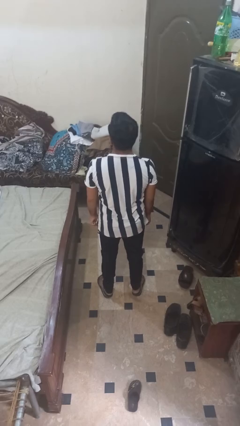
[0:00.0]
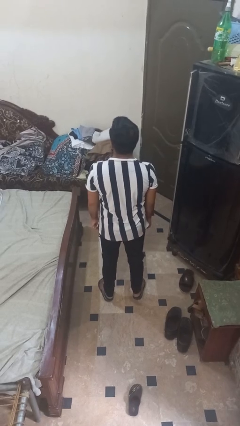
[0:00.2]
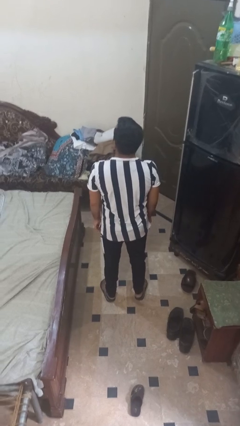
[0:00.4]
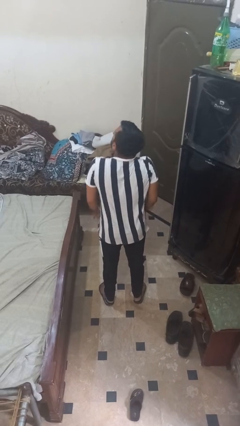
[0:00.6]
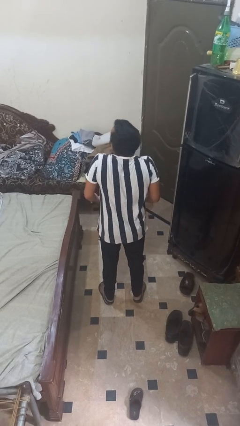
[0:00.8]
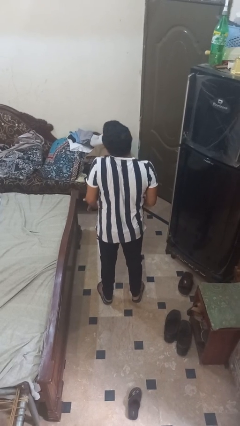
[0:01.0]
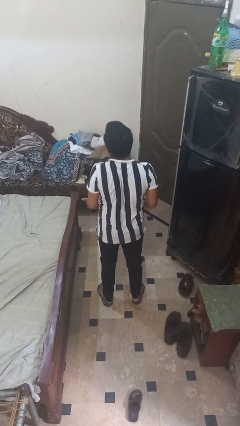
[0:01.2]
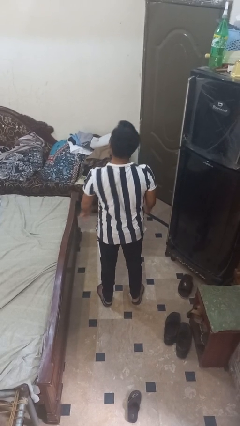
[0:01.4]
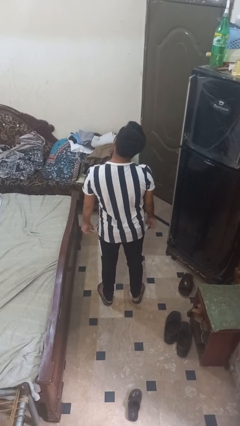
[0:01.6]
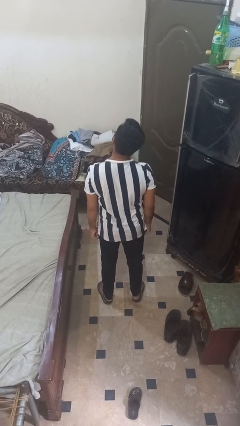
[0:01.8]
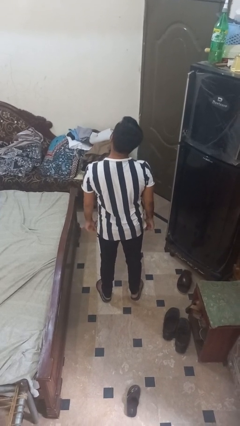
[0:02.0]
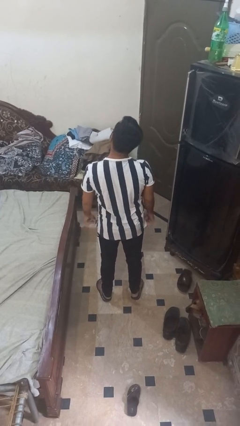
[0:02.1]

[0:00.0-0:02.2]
person shrugs

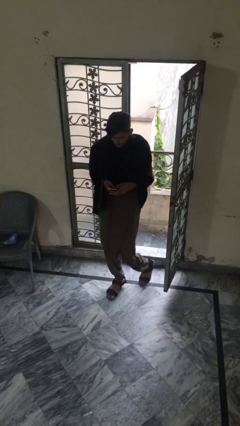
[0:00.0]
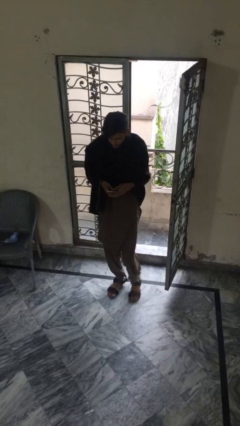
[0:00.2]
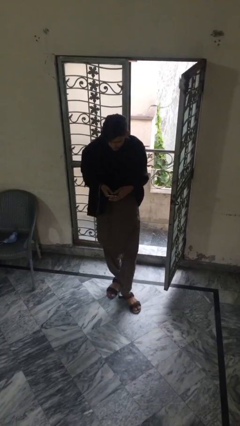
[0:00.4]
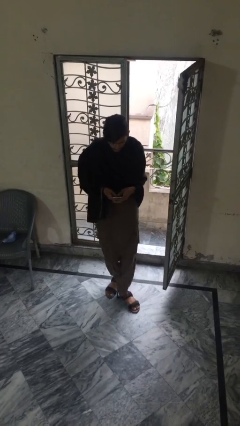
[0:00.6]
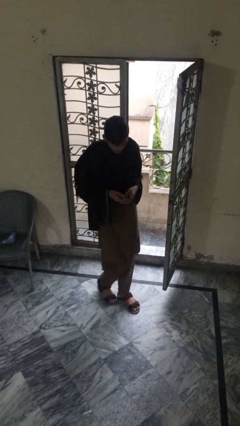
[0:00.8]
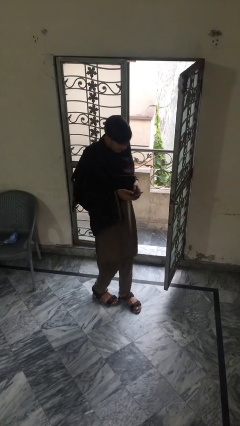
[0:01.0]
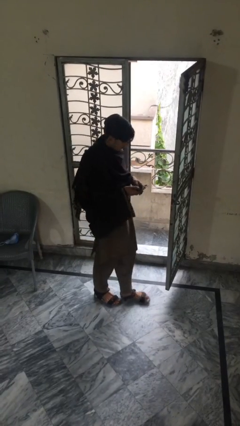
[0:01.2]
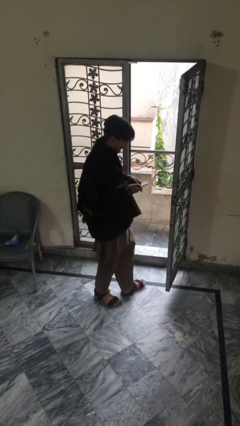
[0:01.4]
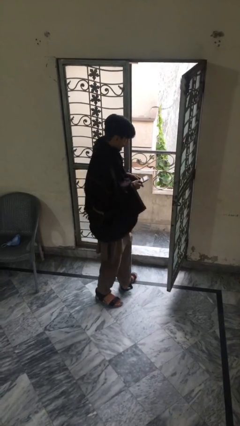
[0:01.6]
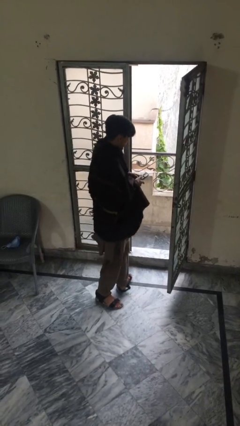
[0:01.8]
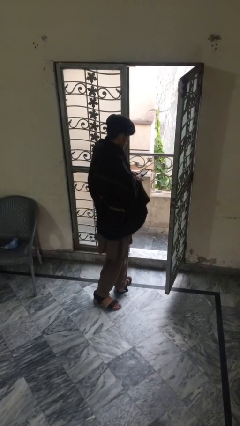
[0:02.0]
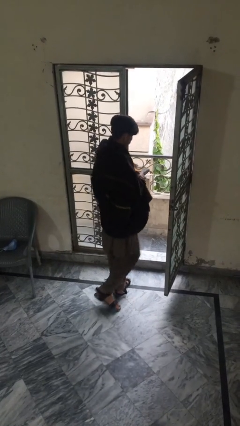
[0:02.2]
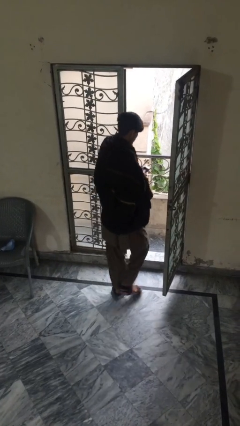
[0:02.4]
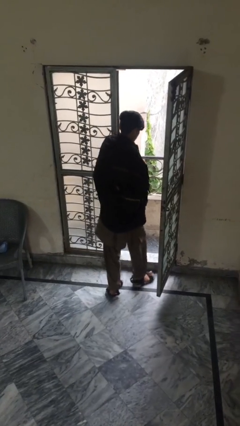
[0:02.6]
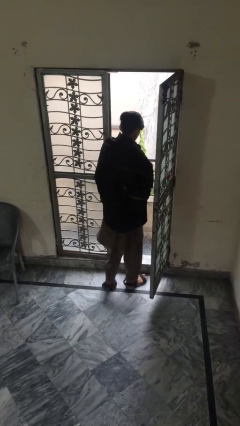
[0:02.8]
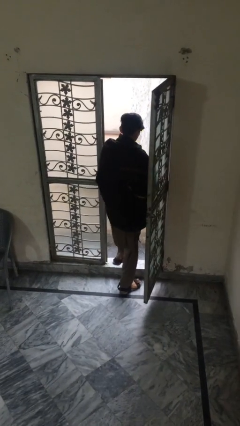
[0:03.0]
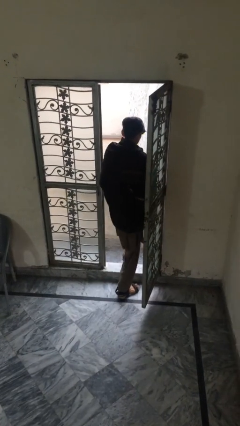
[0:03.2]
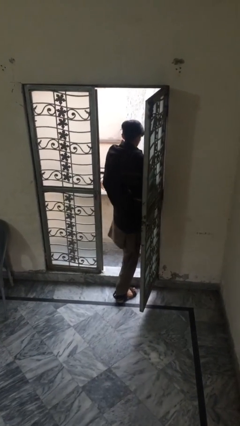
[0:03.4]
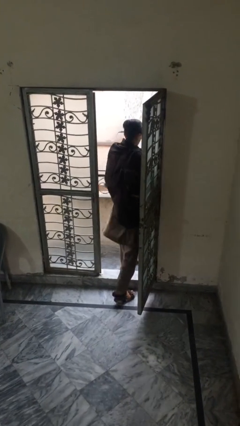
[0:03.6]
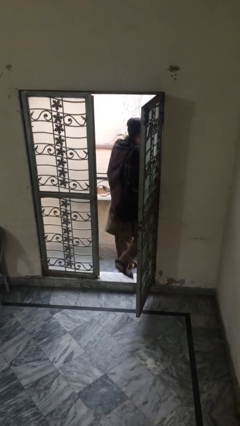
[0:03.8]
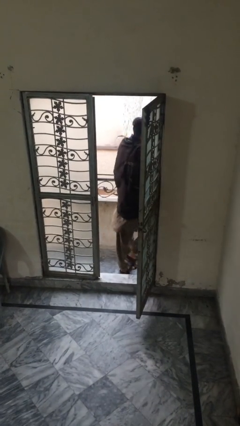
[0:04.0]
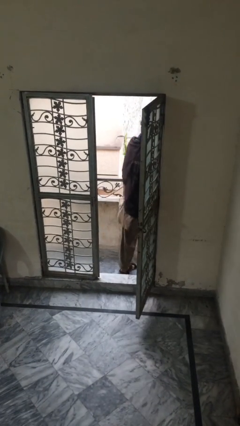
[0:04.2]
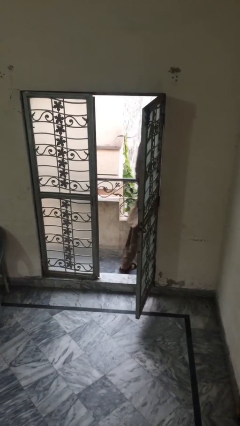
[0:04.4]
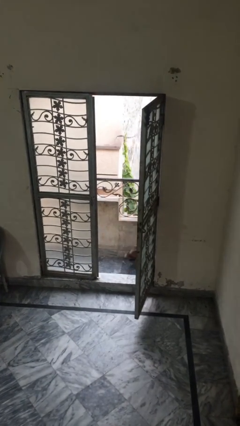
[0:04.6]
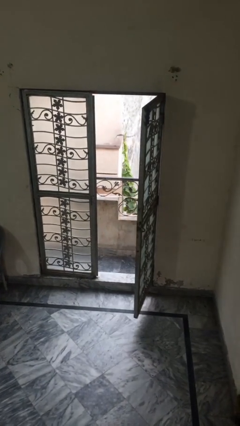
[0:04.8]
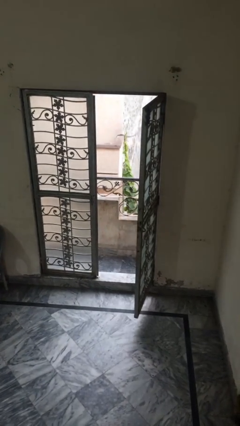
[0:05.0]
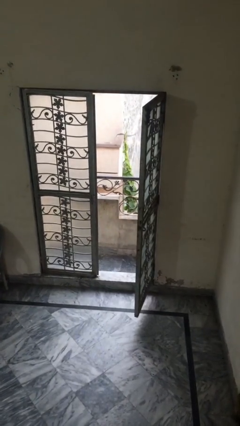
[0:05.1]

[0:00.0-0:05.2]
person exits scene through structure

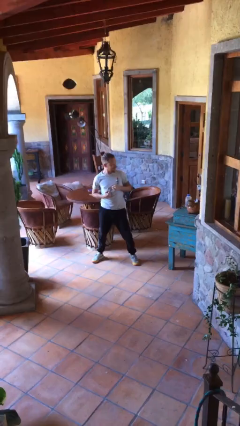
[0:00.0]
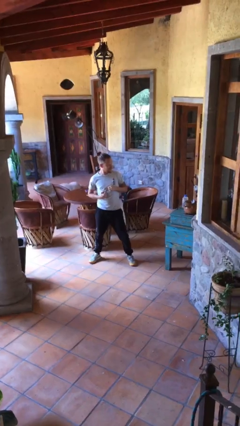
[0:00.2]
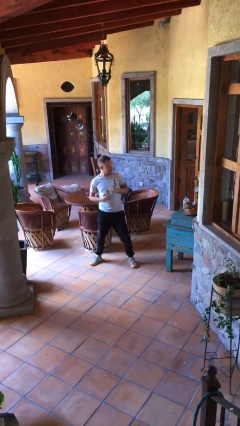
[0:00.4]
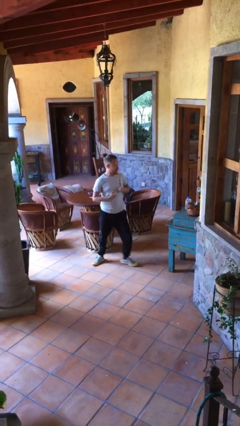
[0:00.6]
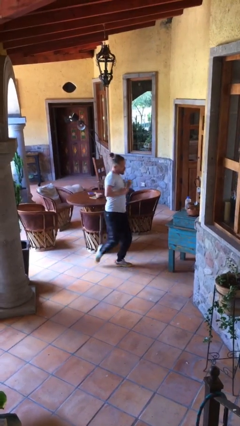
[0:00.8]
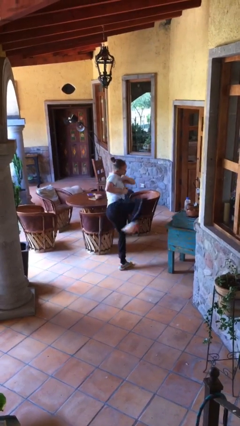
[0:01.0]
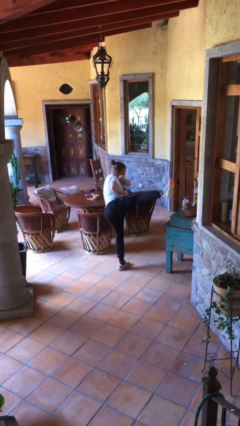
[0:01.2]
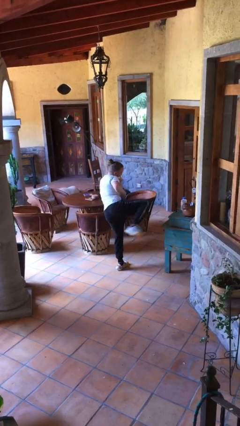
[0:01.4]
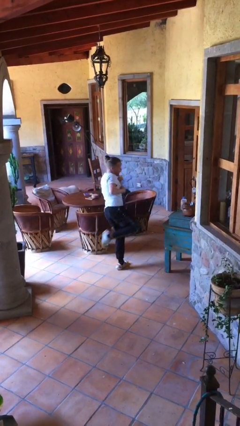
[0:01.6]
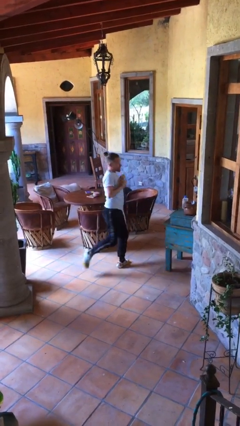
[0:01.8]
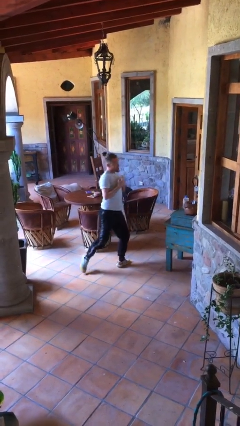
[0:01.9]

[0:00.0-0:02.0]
person karate kicks

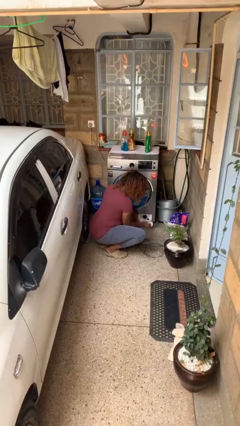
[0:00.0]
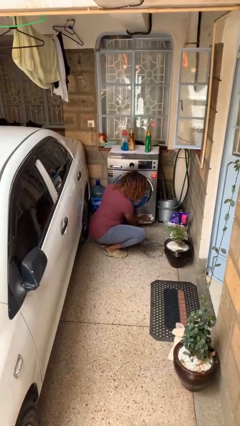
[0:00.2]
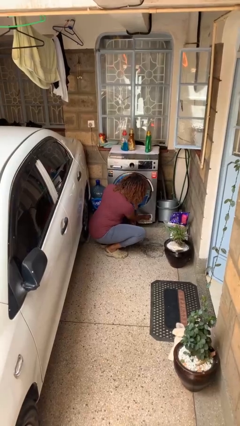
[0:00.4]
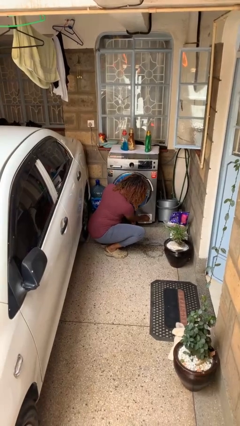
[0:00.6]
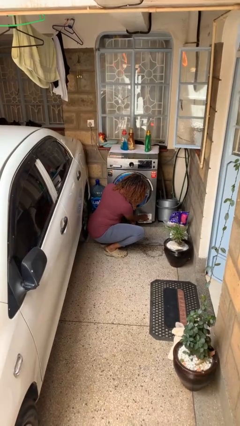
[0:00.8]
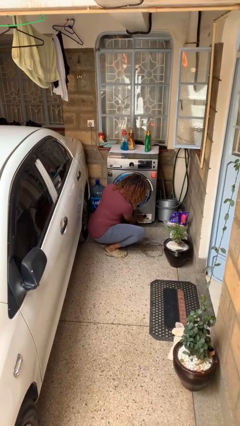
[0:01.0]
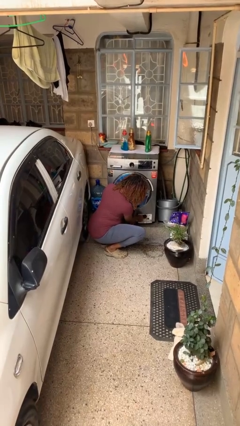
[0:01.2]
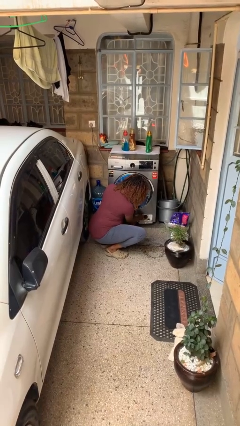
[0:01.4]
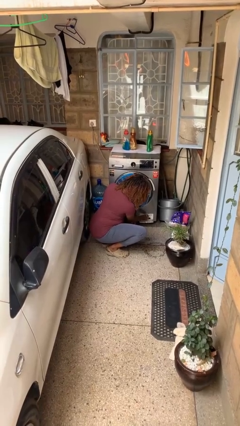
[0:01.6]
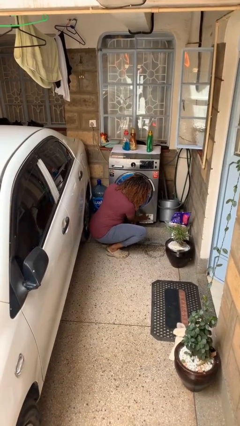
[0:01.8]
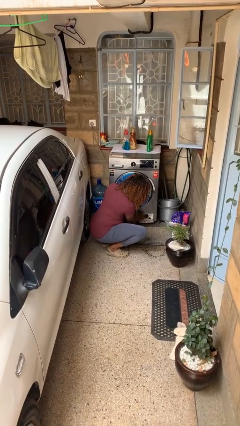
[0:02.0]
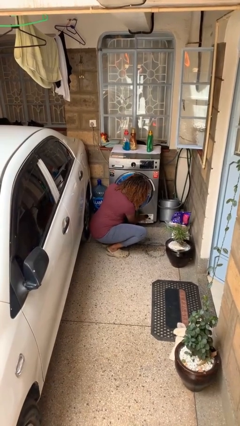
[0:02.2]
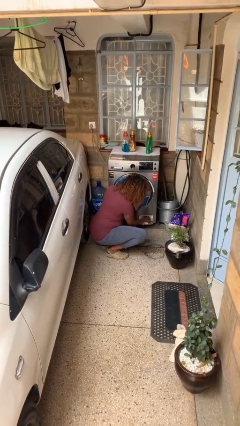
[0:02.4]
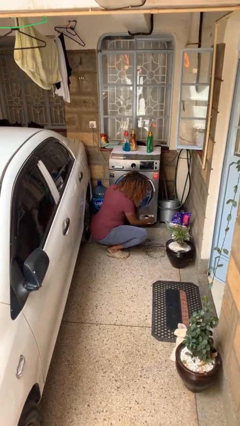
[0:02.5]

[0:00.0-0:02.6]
person cleans dryer lint trap

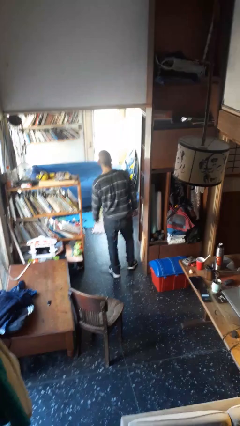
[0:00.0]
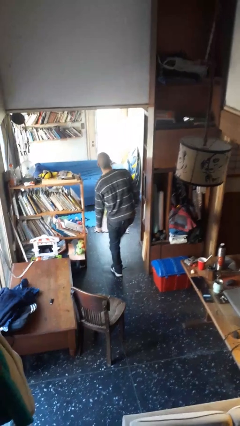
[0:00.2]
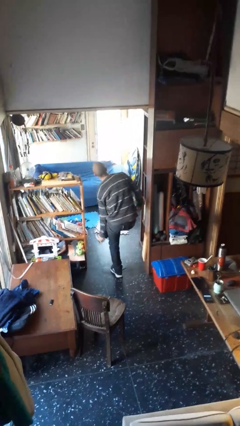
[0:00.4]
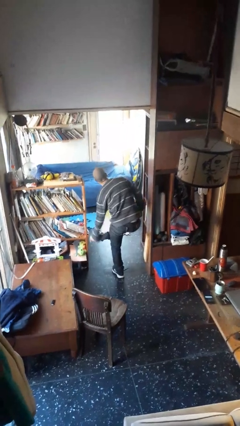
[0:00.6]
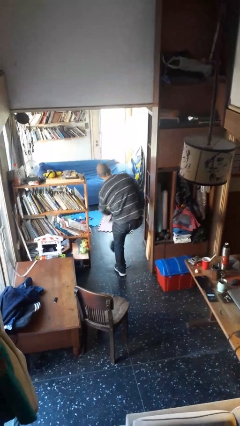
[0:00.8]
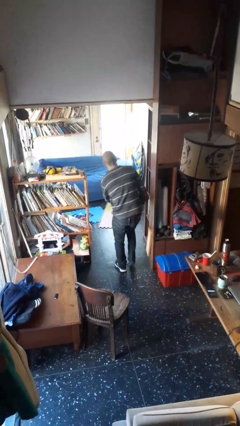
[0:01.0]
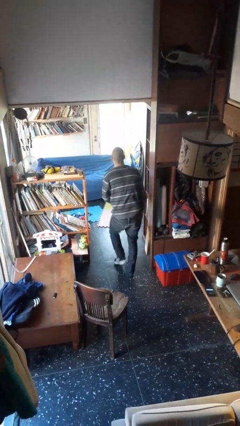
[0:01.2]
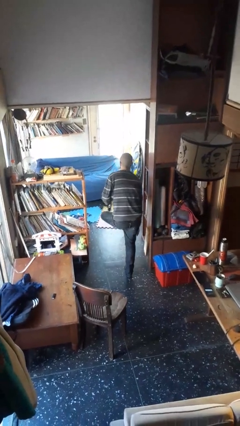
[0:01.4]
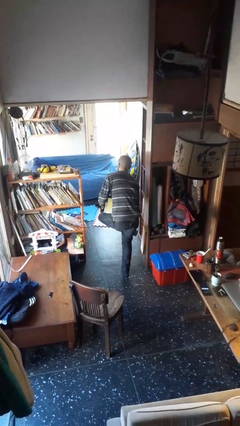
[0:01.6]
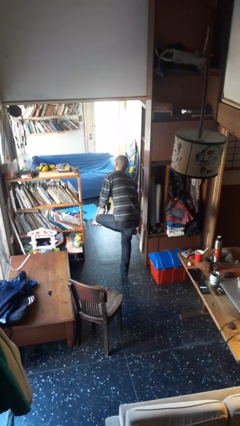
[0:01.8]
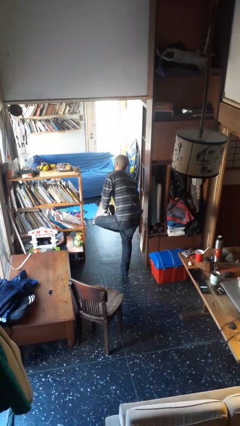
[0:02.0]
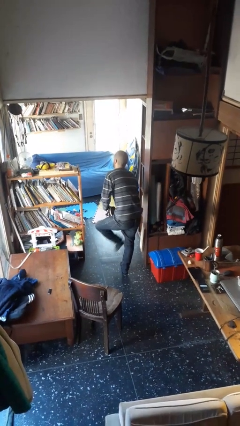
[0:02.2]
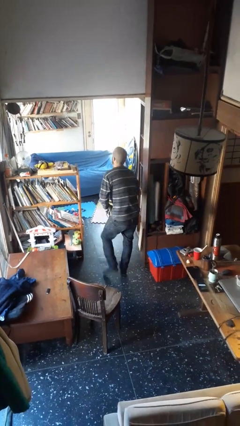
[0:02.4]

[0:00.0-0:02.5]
person takes off shoes

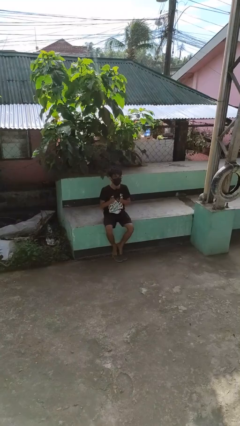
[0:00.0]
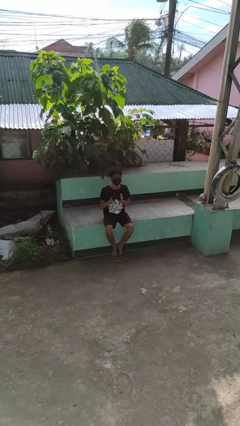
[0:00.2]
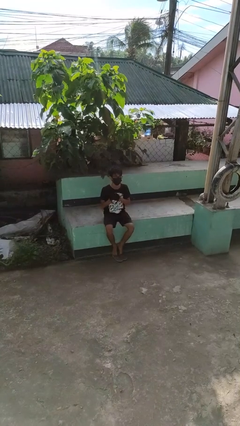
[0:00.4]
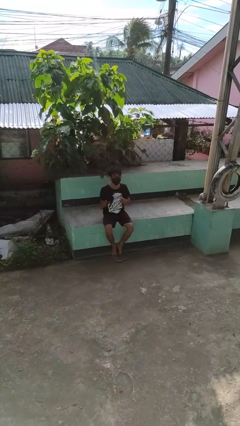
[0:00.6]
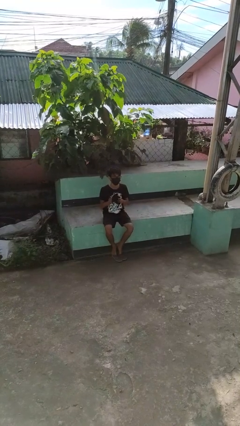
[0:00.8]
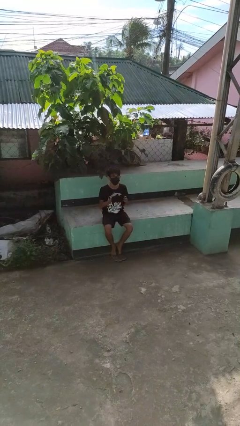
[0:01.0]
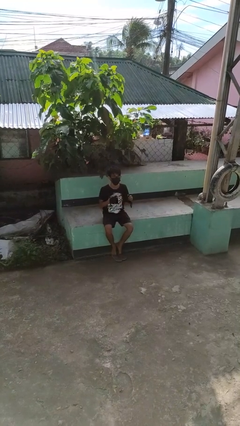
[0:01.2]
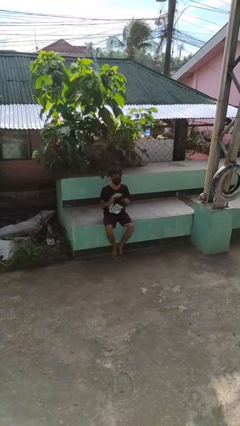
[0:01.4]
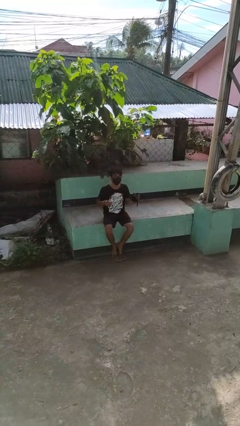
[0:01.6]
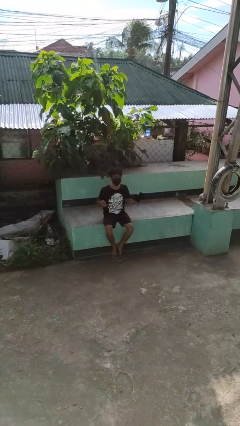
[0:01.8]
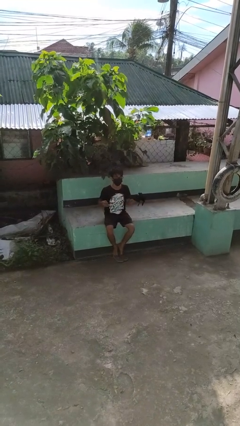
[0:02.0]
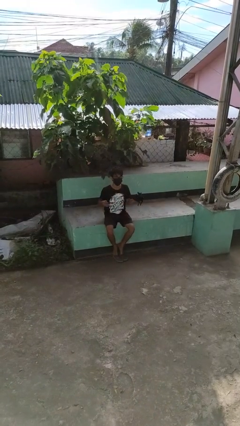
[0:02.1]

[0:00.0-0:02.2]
person takes off gloves

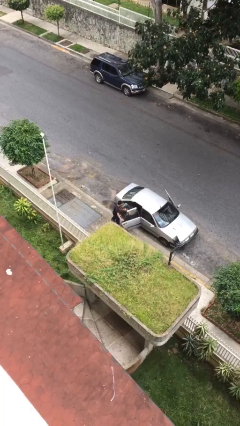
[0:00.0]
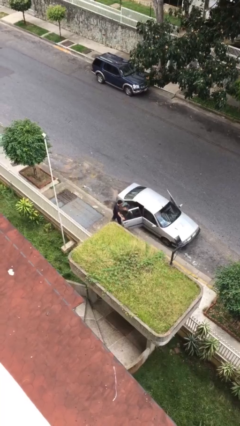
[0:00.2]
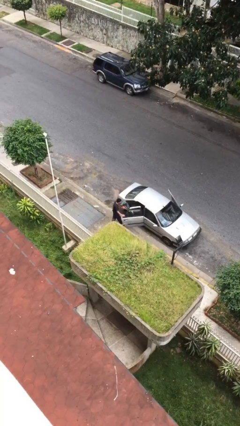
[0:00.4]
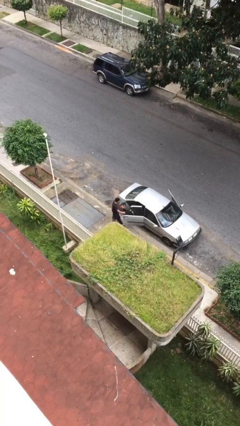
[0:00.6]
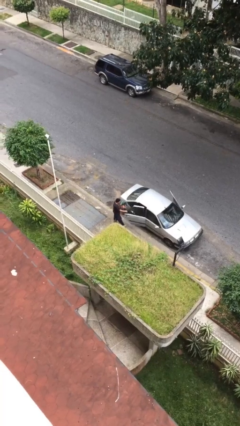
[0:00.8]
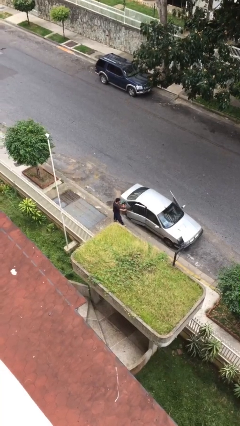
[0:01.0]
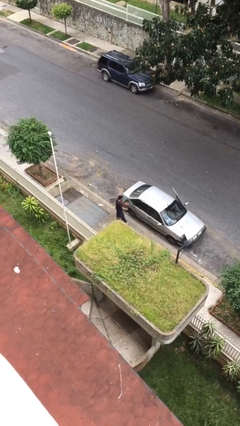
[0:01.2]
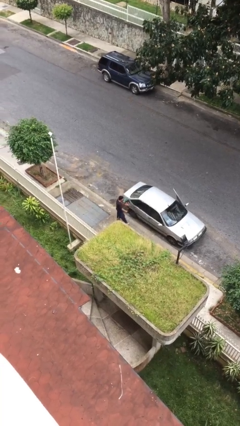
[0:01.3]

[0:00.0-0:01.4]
person closes car door
